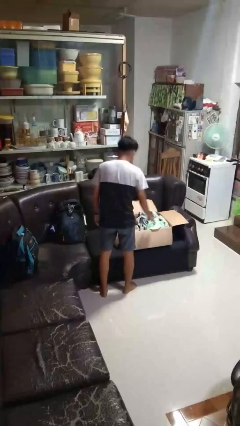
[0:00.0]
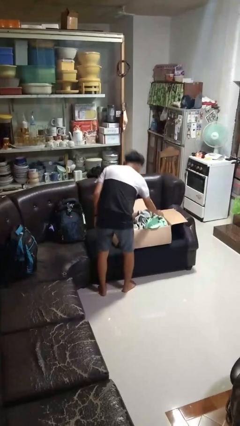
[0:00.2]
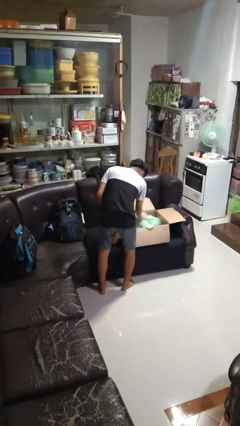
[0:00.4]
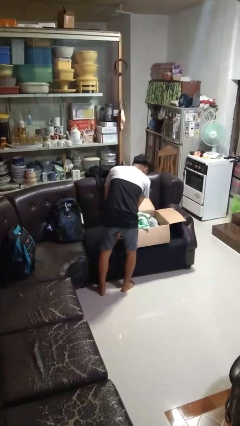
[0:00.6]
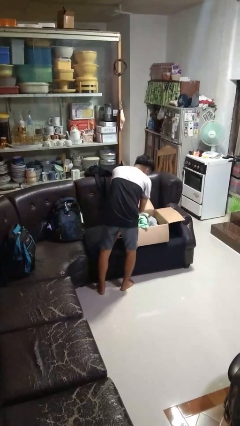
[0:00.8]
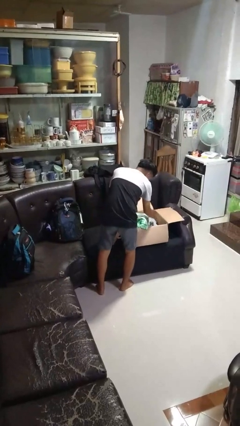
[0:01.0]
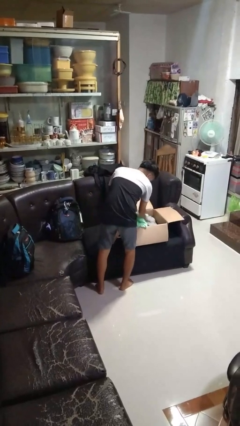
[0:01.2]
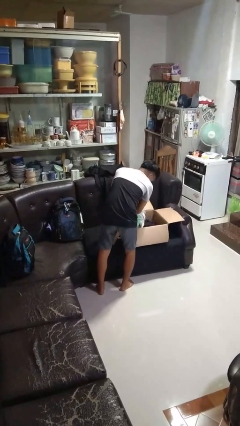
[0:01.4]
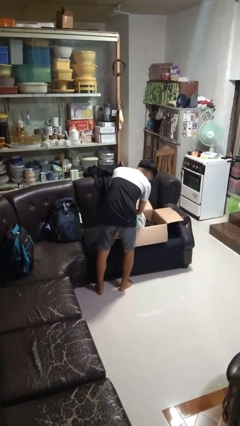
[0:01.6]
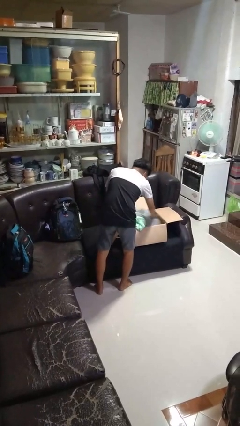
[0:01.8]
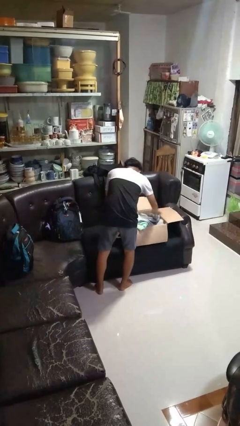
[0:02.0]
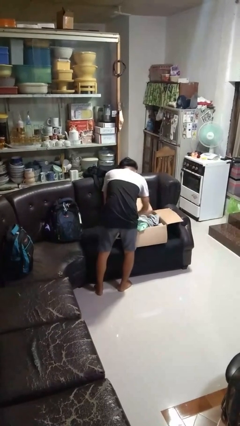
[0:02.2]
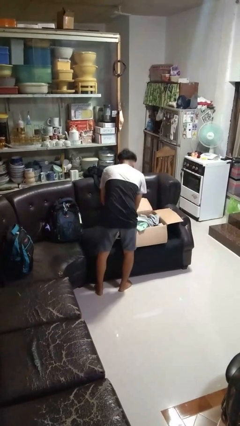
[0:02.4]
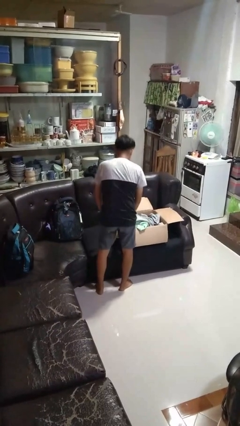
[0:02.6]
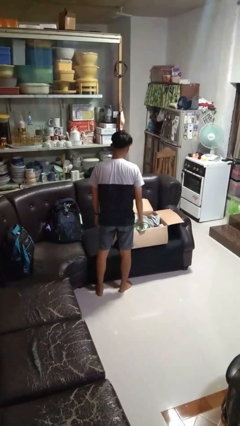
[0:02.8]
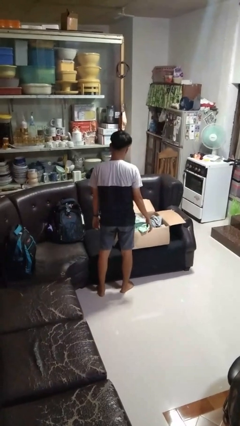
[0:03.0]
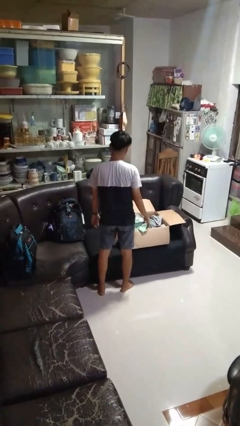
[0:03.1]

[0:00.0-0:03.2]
person searches in box

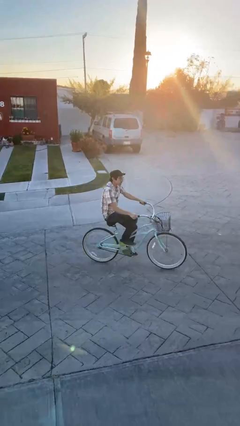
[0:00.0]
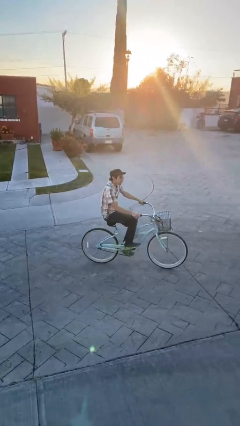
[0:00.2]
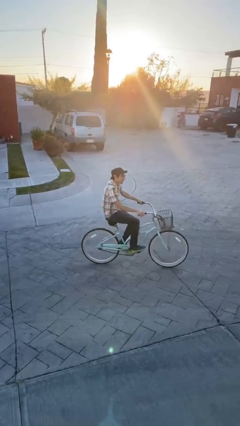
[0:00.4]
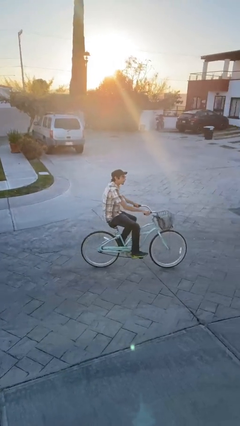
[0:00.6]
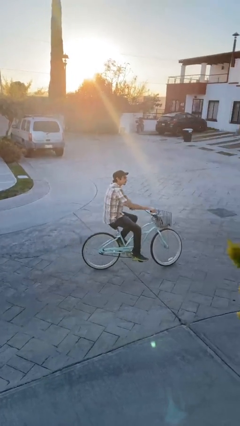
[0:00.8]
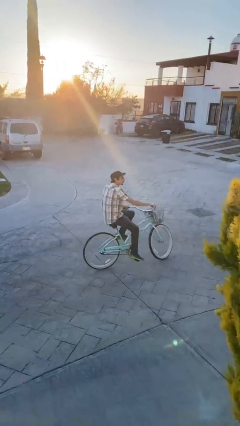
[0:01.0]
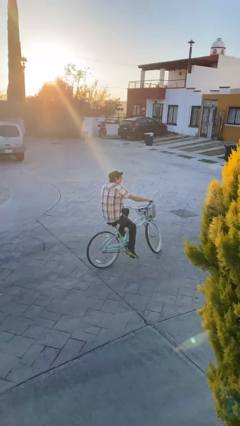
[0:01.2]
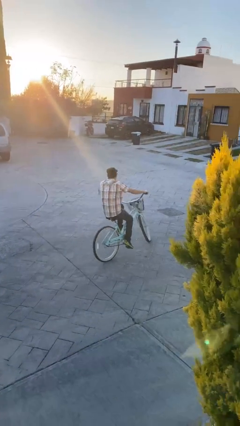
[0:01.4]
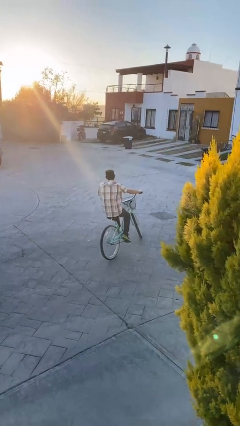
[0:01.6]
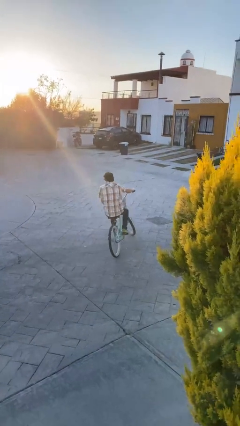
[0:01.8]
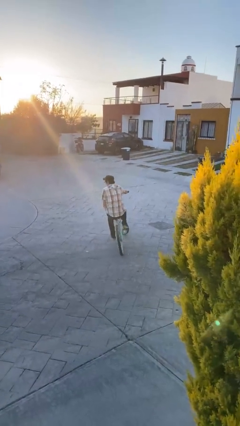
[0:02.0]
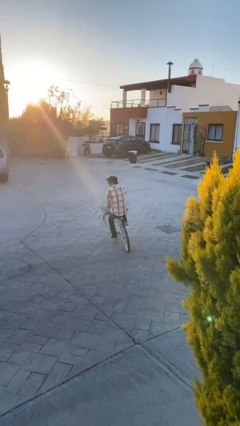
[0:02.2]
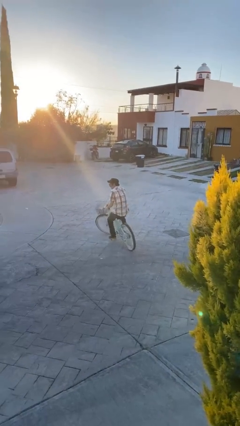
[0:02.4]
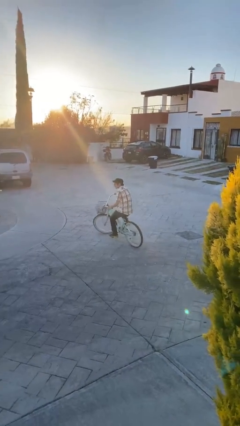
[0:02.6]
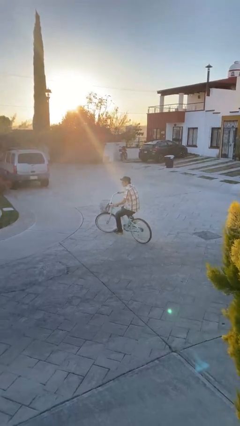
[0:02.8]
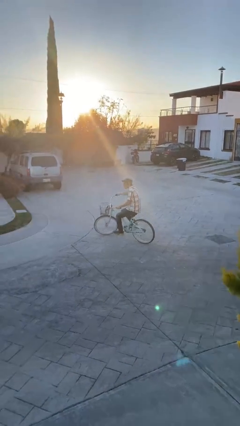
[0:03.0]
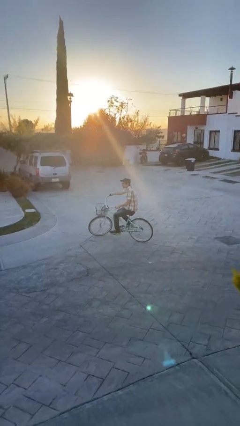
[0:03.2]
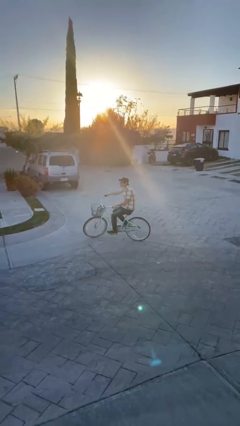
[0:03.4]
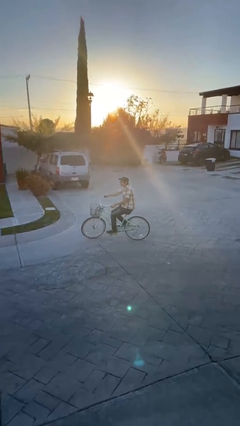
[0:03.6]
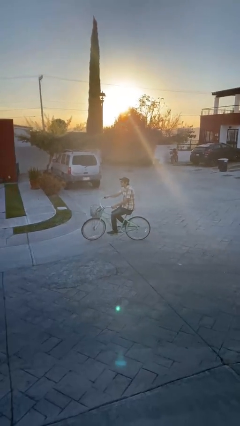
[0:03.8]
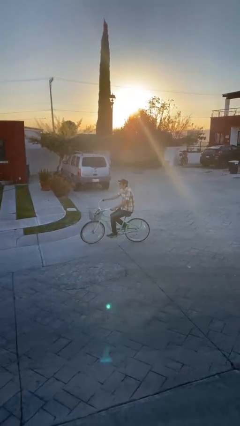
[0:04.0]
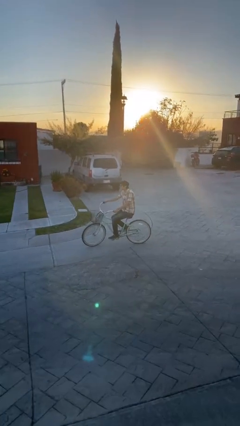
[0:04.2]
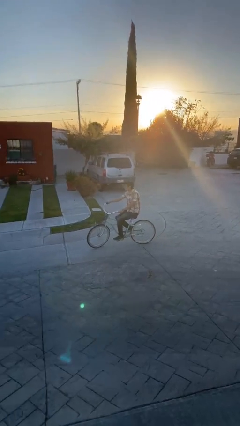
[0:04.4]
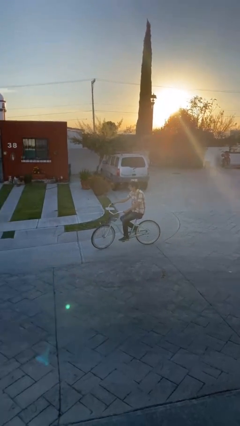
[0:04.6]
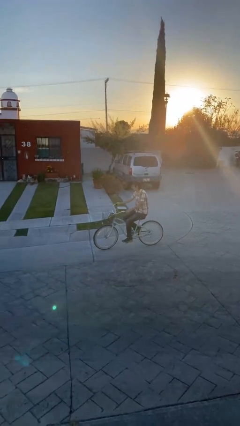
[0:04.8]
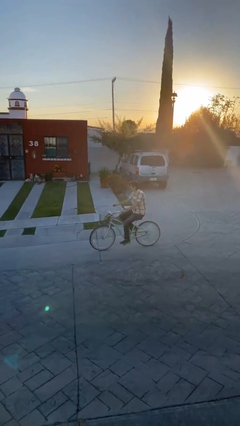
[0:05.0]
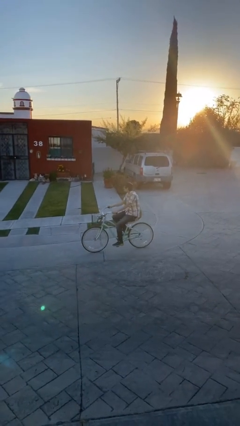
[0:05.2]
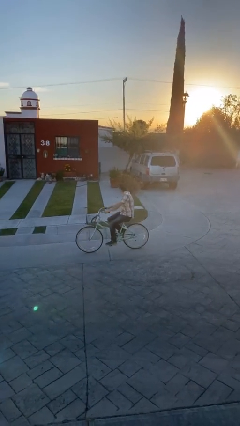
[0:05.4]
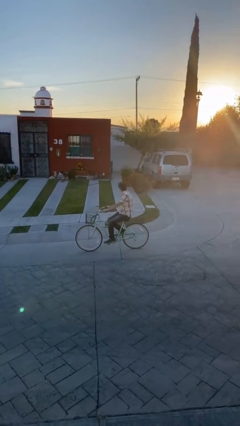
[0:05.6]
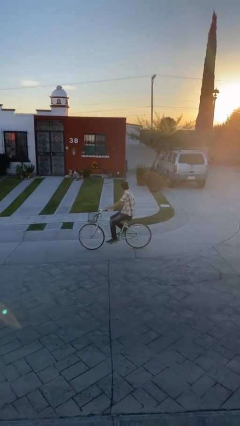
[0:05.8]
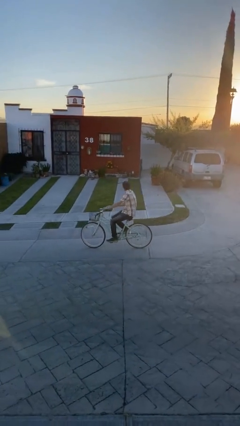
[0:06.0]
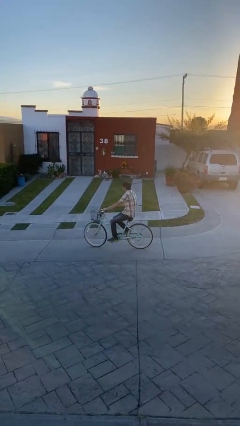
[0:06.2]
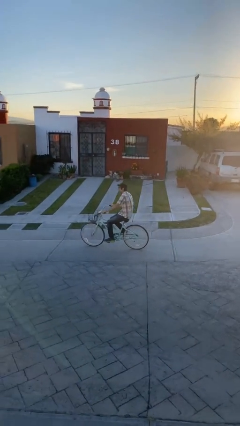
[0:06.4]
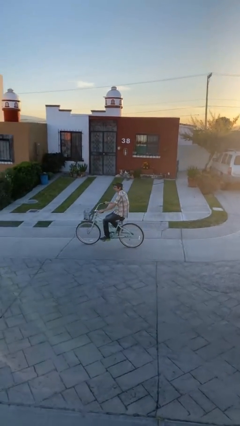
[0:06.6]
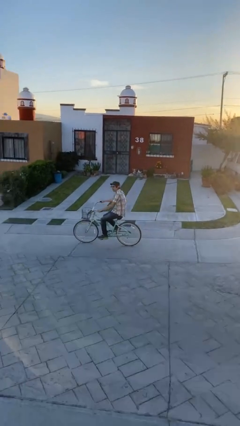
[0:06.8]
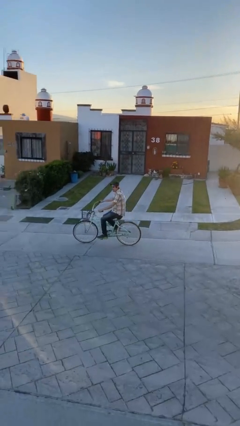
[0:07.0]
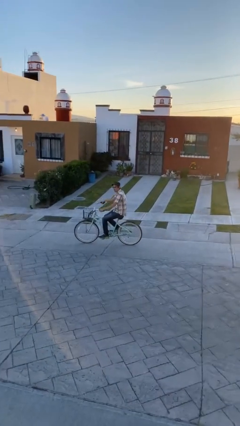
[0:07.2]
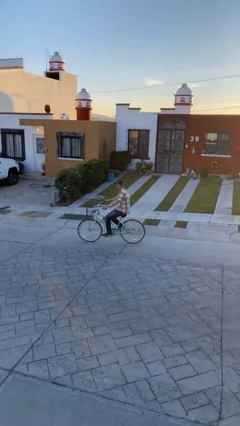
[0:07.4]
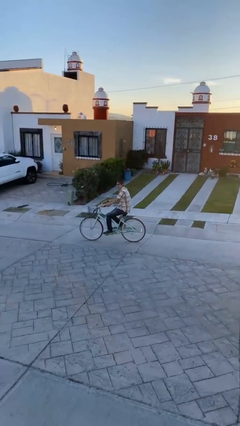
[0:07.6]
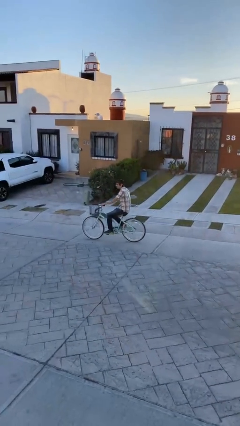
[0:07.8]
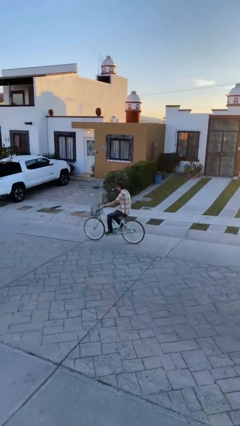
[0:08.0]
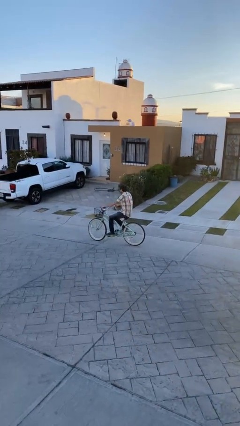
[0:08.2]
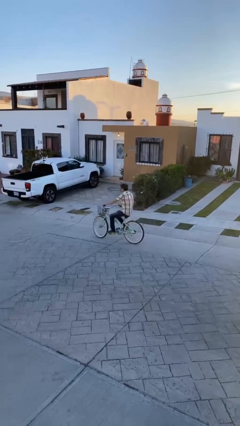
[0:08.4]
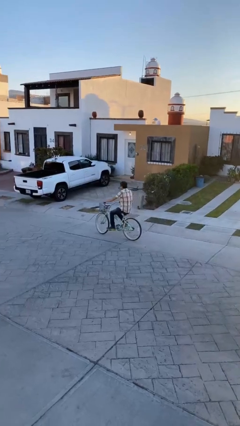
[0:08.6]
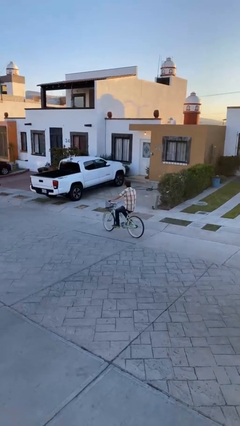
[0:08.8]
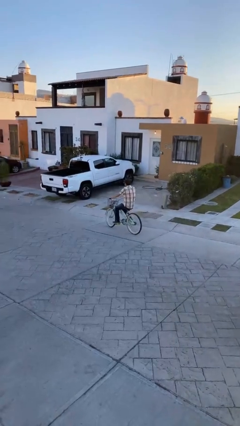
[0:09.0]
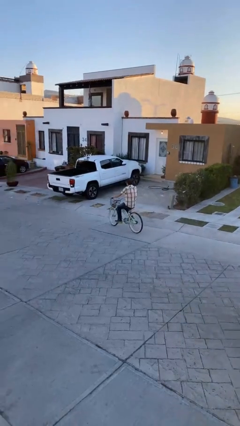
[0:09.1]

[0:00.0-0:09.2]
person rides bicycle

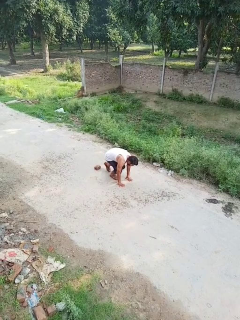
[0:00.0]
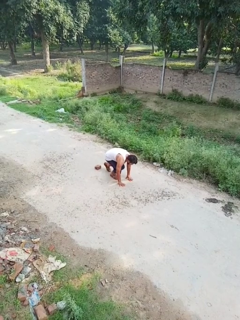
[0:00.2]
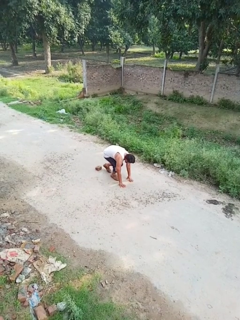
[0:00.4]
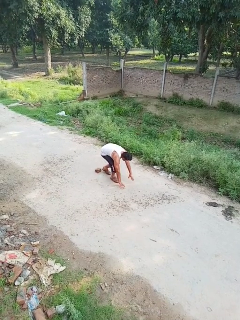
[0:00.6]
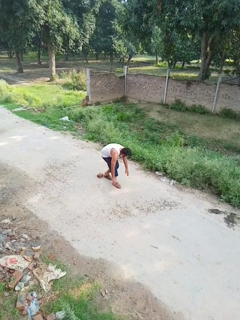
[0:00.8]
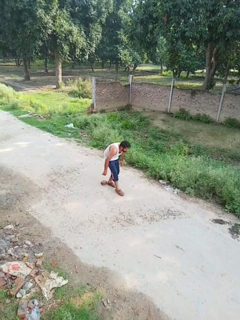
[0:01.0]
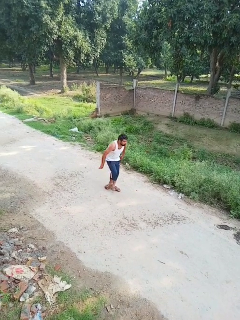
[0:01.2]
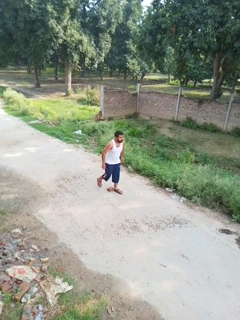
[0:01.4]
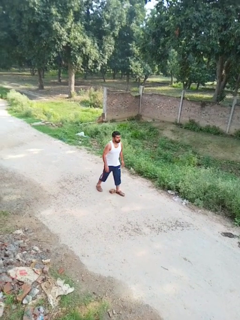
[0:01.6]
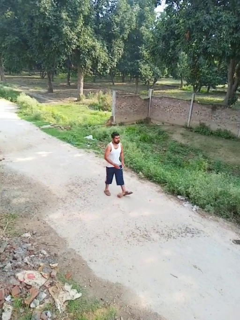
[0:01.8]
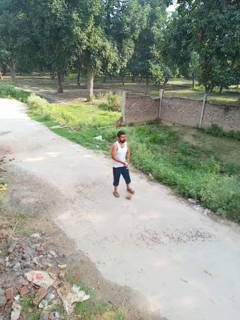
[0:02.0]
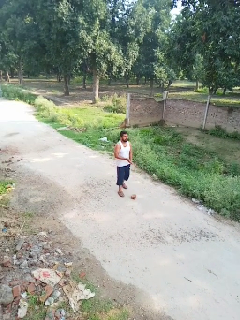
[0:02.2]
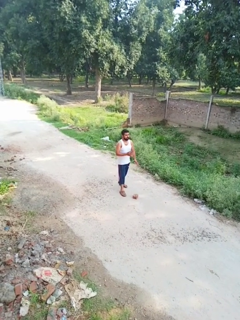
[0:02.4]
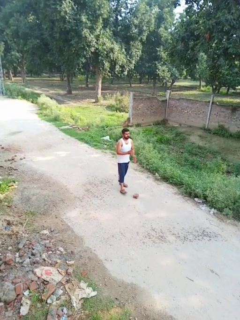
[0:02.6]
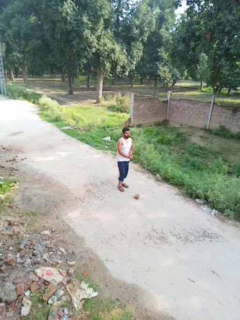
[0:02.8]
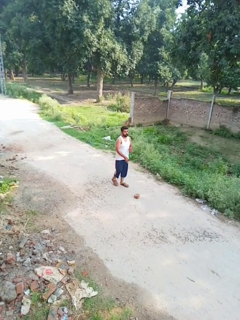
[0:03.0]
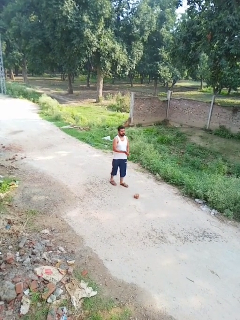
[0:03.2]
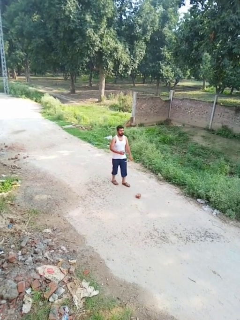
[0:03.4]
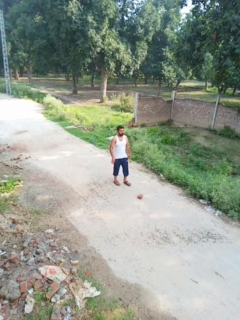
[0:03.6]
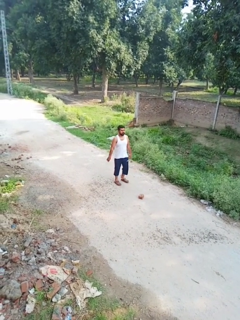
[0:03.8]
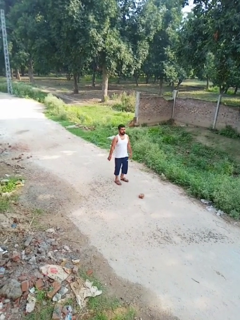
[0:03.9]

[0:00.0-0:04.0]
person stands up from floor

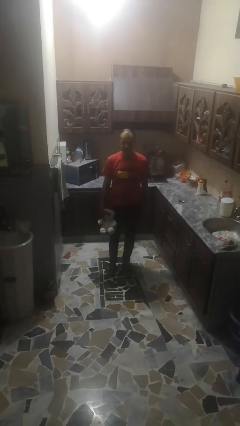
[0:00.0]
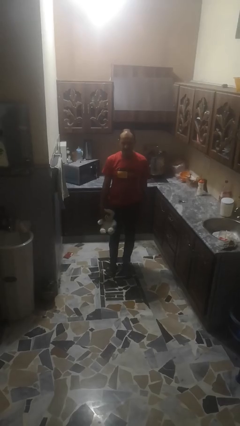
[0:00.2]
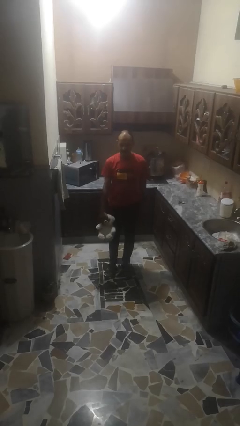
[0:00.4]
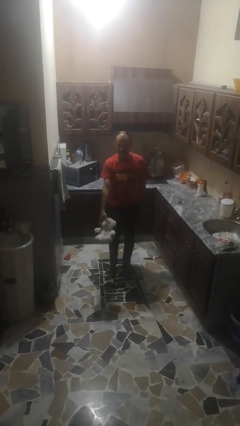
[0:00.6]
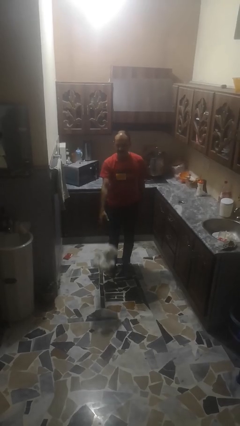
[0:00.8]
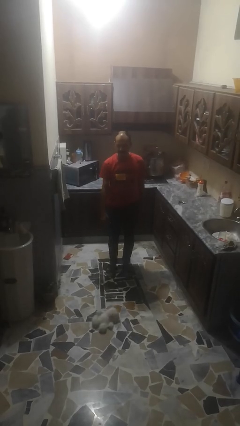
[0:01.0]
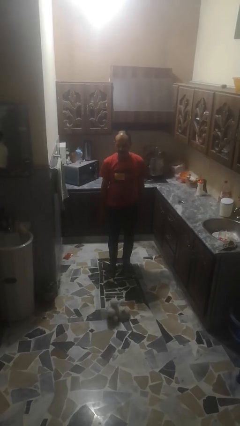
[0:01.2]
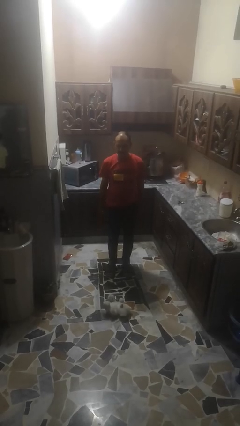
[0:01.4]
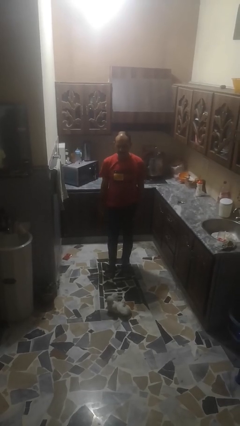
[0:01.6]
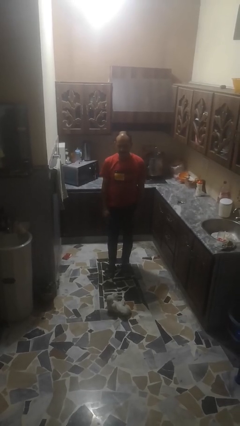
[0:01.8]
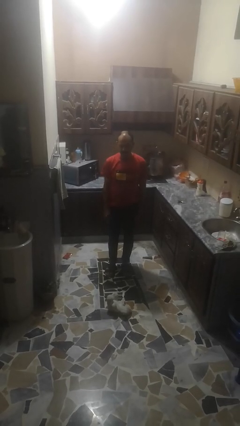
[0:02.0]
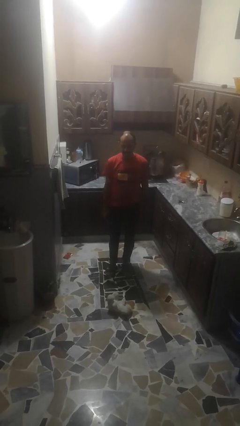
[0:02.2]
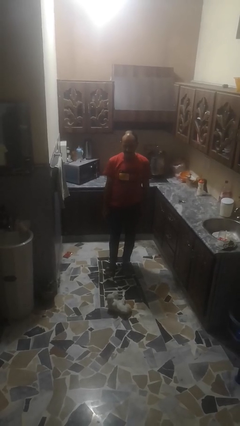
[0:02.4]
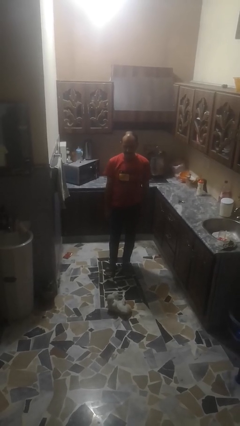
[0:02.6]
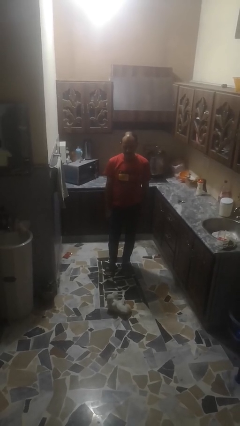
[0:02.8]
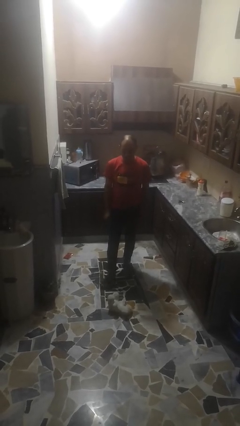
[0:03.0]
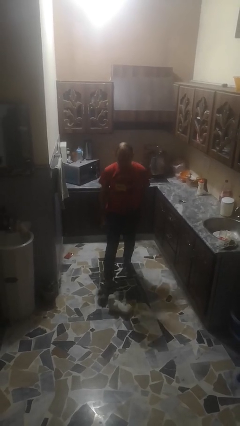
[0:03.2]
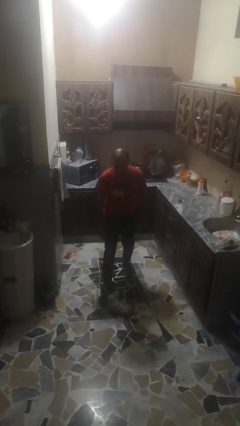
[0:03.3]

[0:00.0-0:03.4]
person throws object to ground
